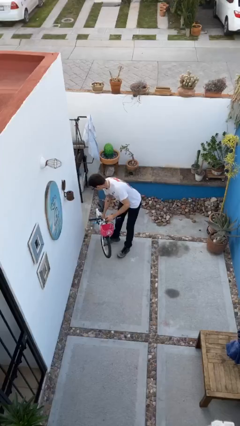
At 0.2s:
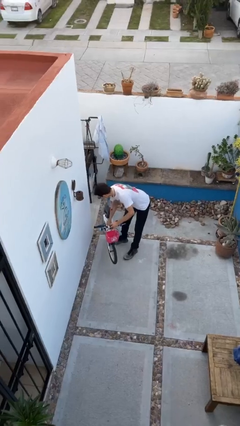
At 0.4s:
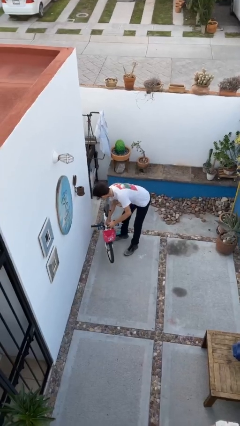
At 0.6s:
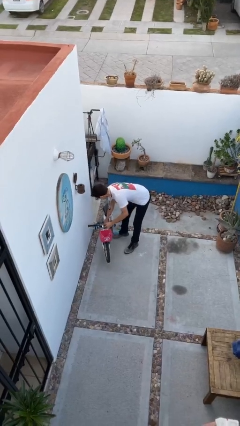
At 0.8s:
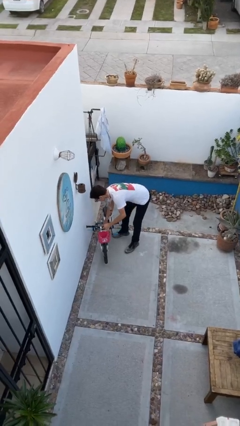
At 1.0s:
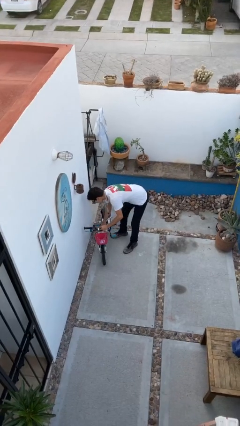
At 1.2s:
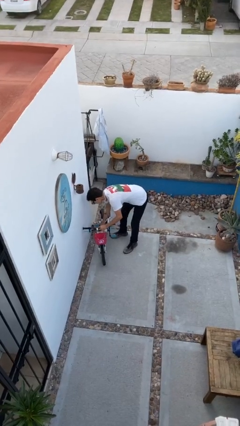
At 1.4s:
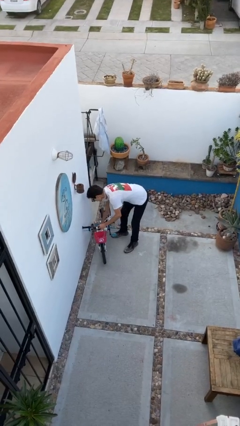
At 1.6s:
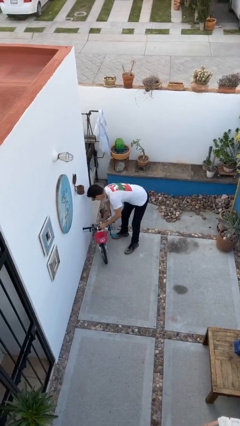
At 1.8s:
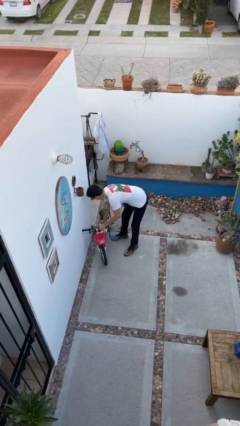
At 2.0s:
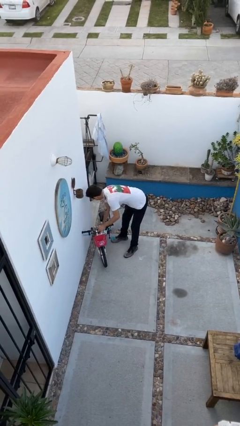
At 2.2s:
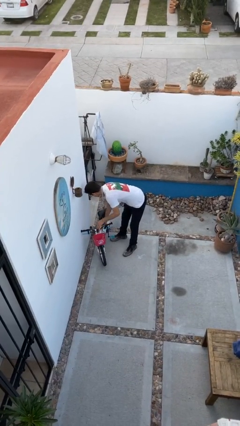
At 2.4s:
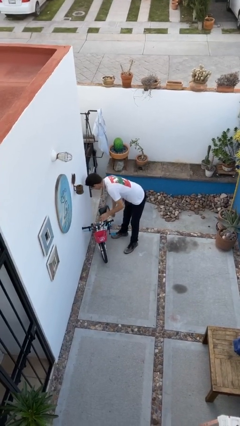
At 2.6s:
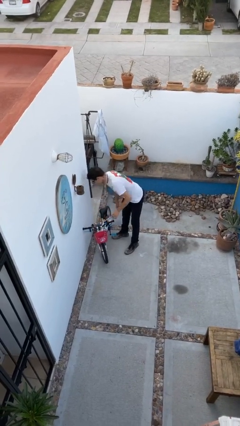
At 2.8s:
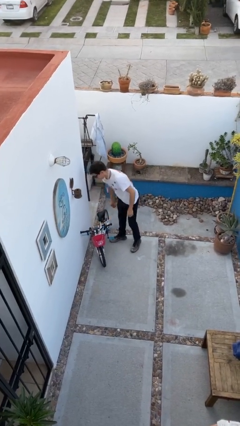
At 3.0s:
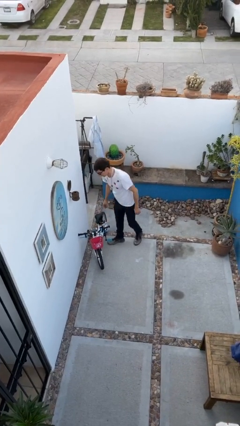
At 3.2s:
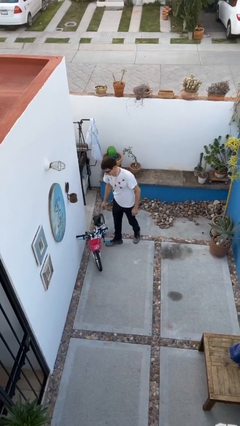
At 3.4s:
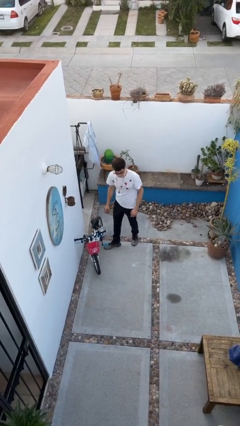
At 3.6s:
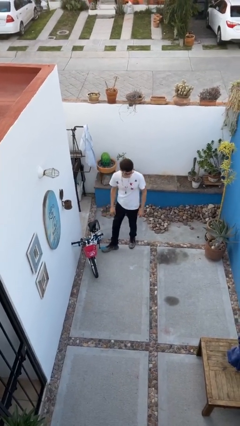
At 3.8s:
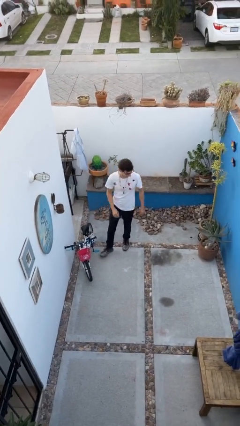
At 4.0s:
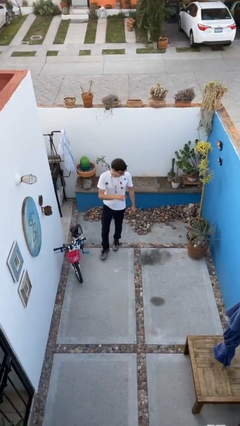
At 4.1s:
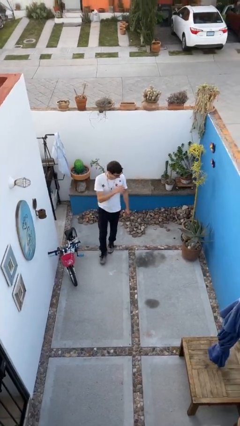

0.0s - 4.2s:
person puts down object on floor

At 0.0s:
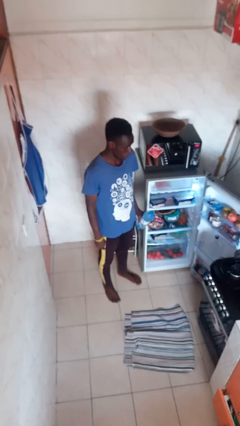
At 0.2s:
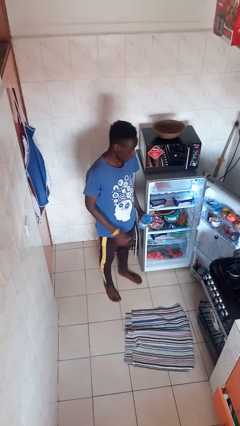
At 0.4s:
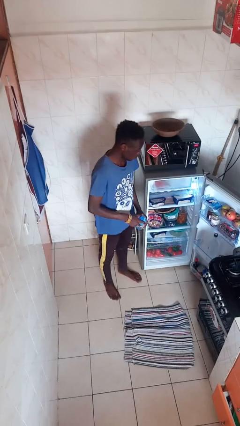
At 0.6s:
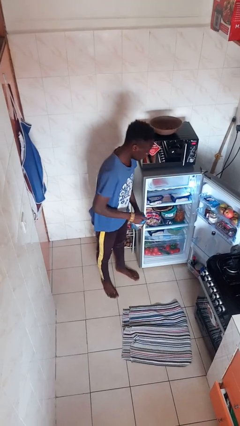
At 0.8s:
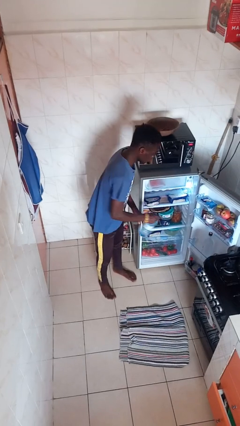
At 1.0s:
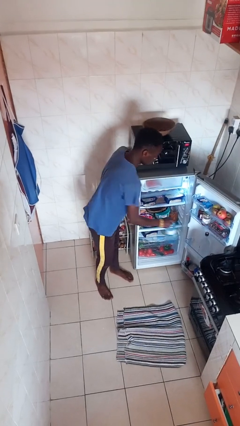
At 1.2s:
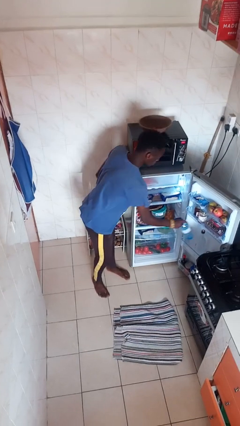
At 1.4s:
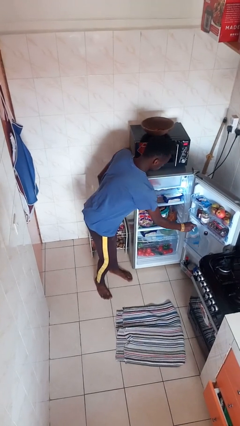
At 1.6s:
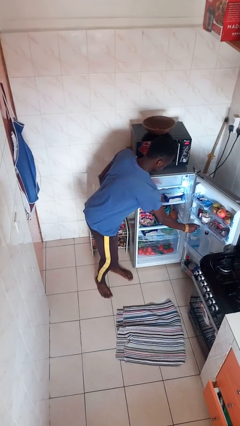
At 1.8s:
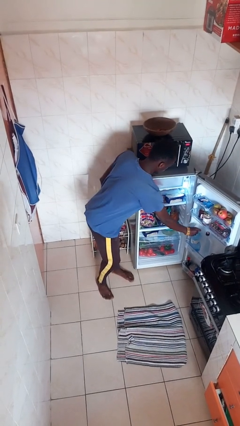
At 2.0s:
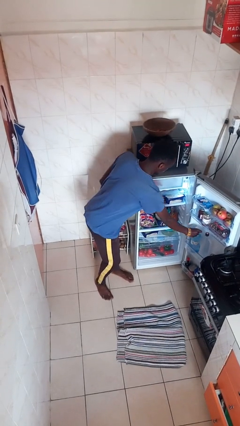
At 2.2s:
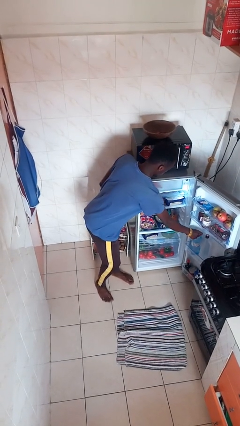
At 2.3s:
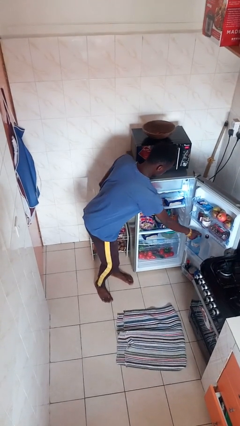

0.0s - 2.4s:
person puts object into refrigerator

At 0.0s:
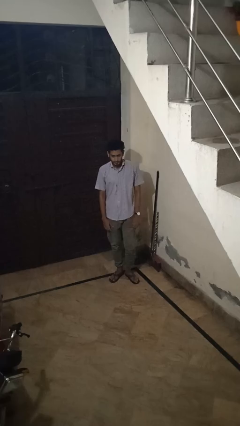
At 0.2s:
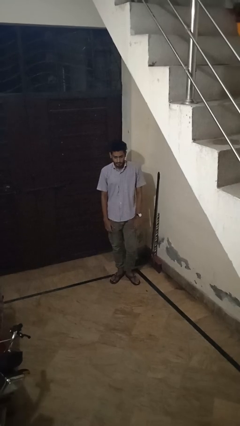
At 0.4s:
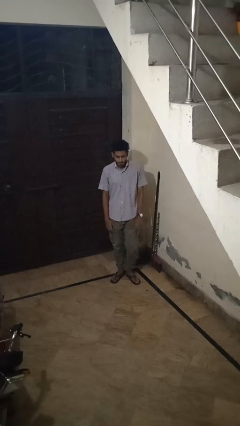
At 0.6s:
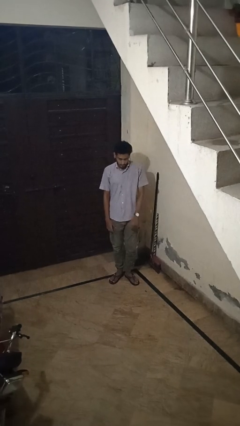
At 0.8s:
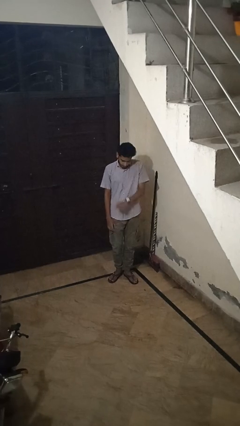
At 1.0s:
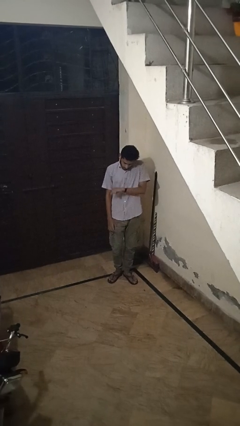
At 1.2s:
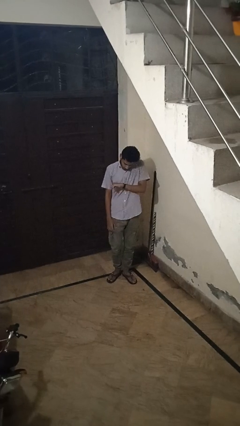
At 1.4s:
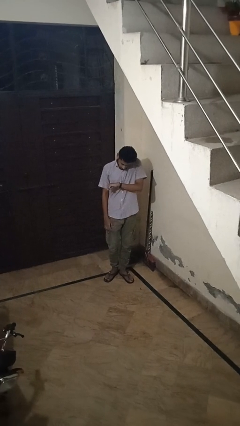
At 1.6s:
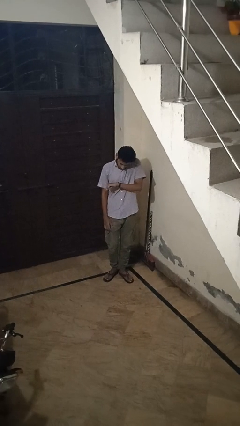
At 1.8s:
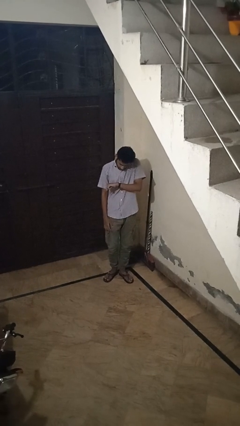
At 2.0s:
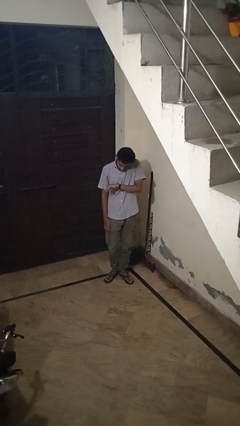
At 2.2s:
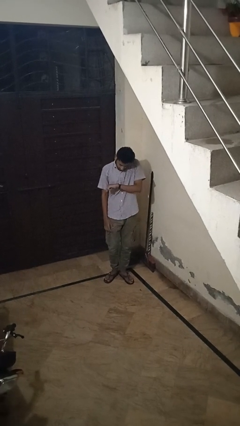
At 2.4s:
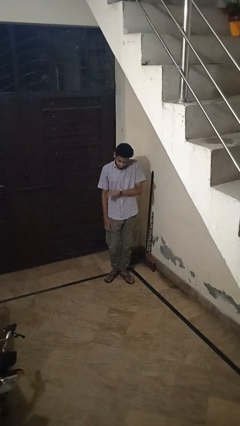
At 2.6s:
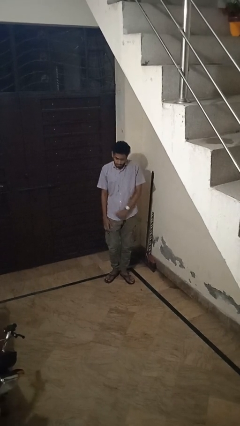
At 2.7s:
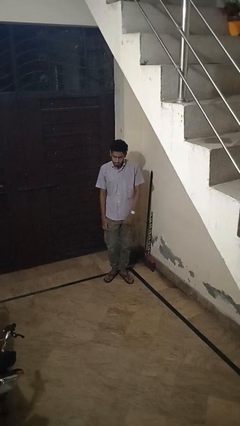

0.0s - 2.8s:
person looks at wristwatch

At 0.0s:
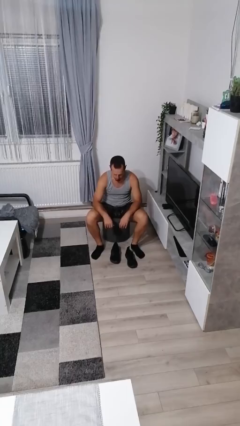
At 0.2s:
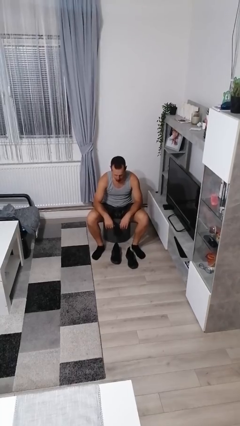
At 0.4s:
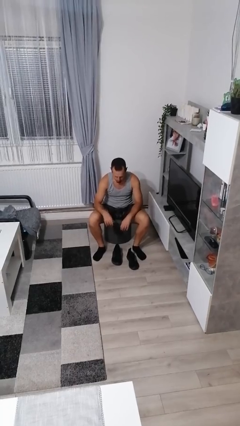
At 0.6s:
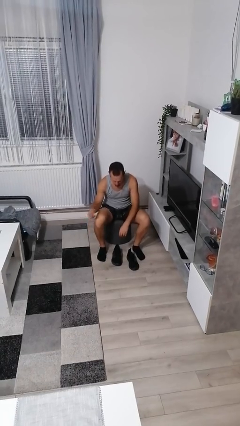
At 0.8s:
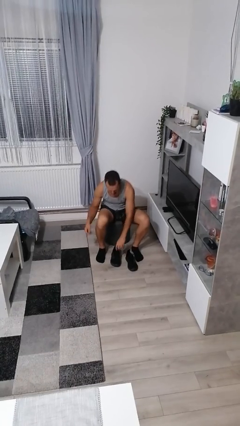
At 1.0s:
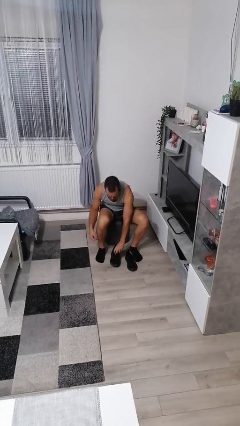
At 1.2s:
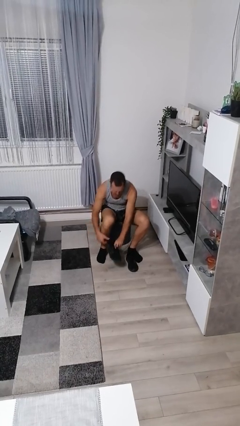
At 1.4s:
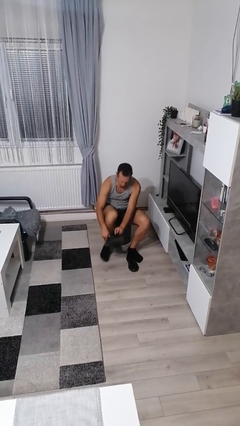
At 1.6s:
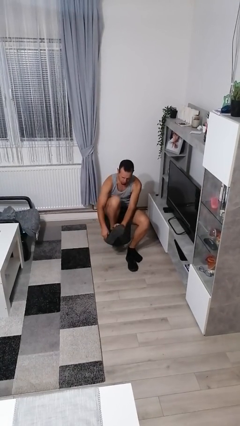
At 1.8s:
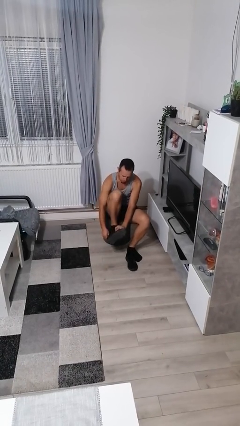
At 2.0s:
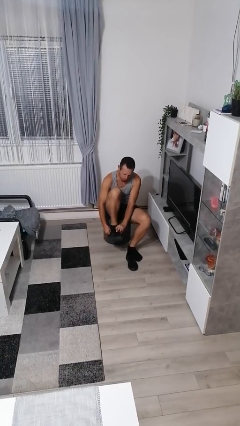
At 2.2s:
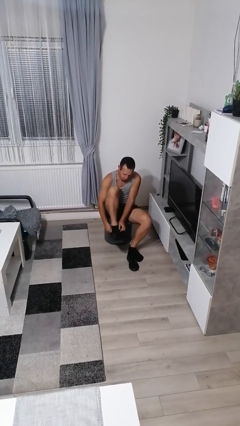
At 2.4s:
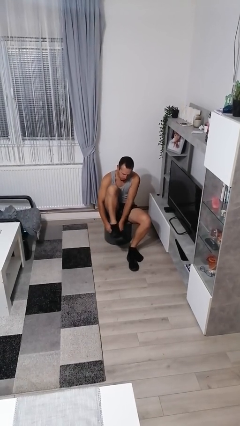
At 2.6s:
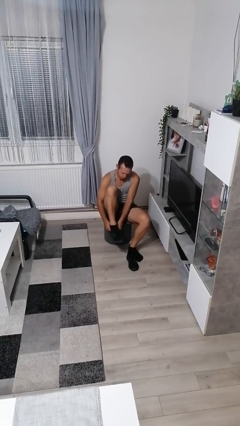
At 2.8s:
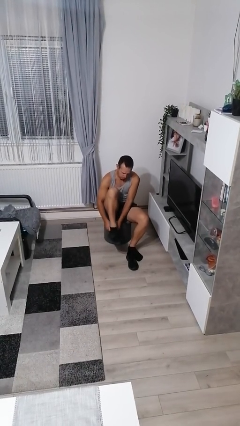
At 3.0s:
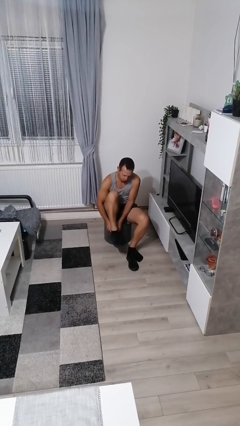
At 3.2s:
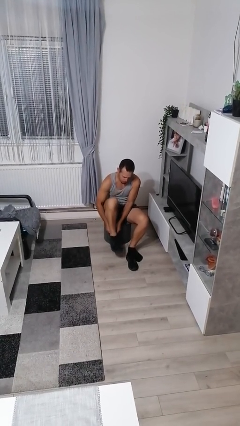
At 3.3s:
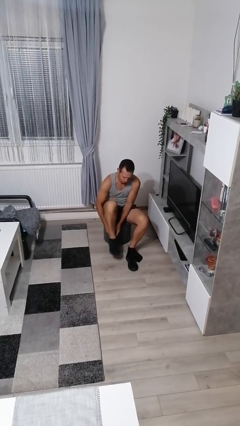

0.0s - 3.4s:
person puts on shoes

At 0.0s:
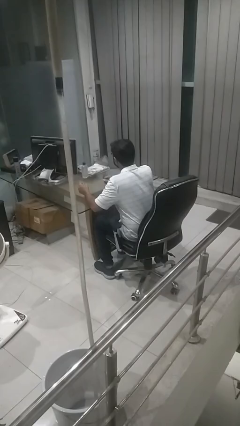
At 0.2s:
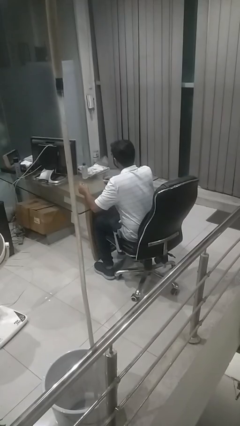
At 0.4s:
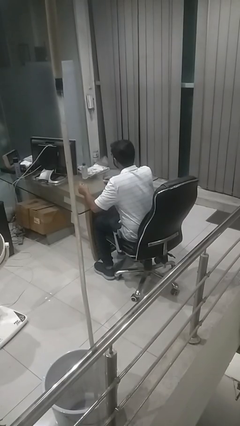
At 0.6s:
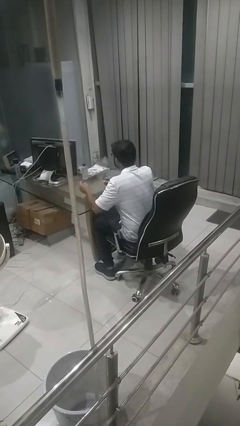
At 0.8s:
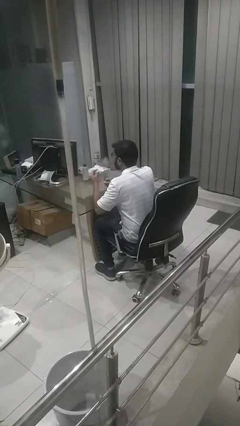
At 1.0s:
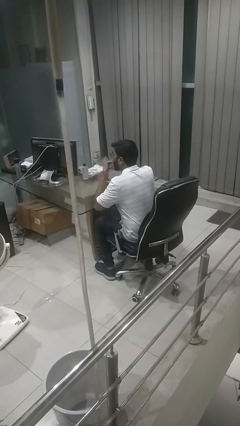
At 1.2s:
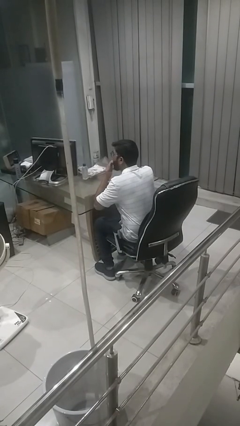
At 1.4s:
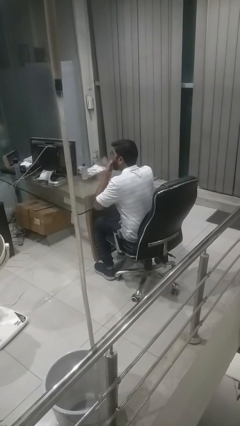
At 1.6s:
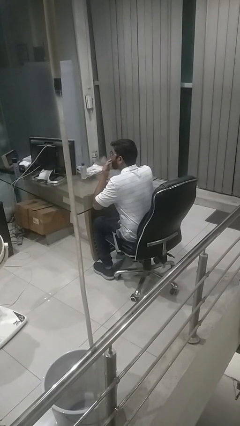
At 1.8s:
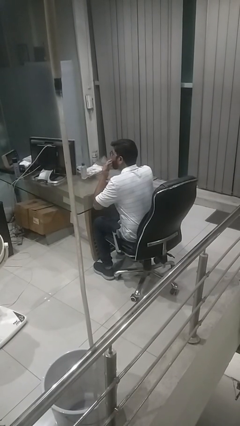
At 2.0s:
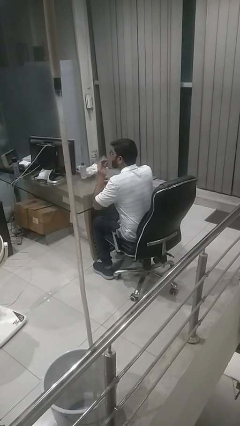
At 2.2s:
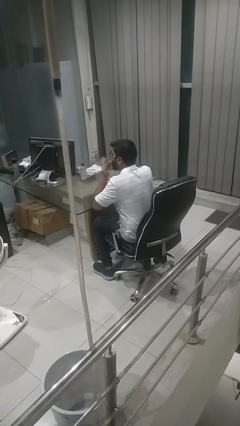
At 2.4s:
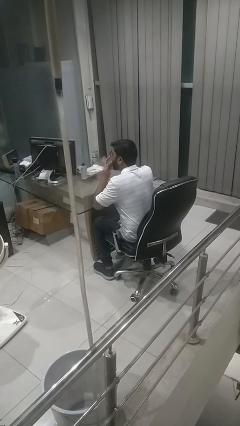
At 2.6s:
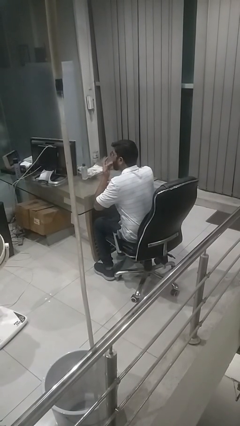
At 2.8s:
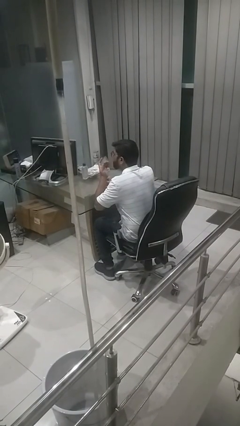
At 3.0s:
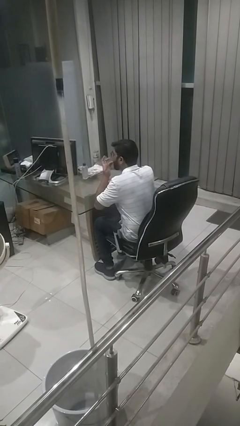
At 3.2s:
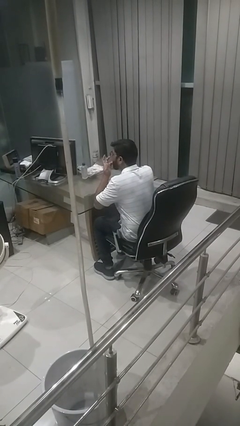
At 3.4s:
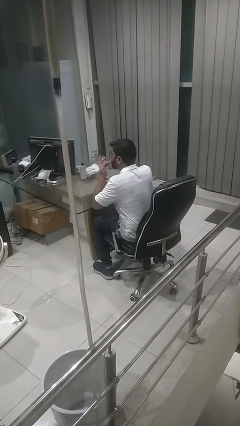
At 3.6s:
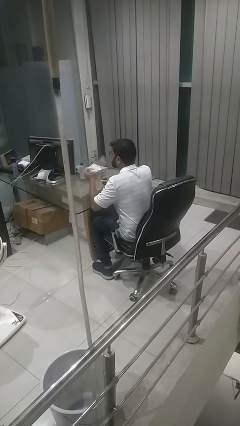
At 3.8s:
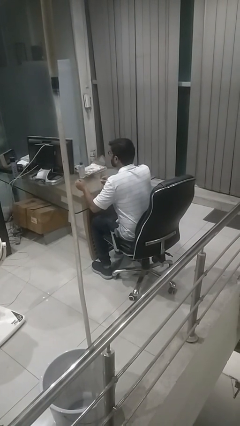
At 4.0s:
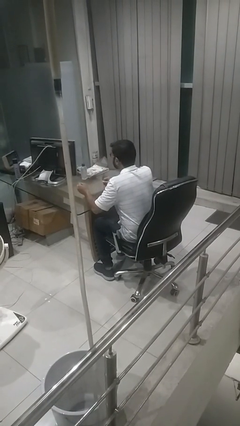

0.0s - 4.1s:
person licks fingers

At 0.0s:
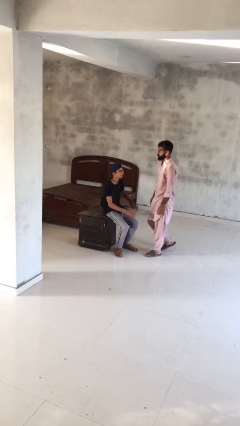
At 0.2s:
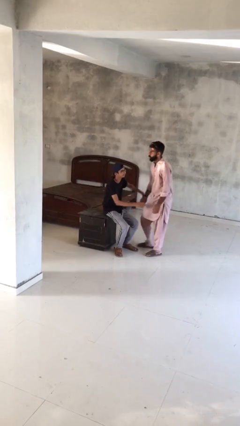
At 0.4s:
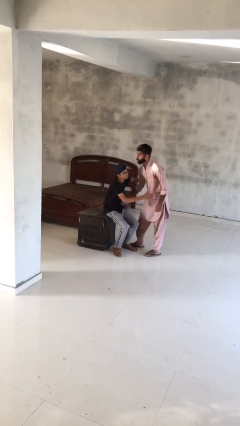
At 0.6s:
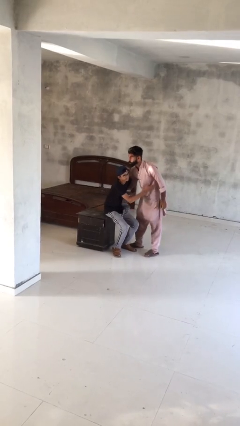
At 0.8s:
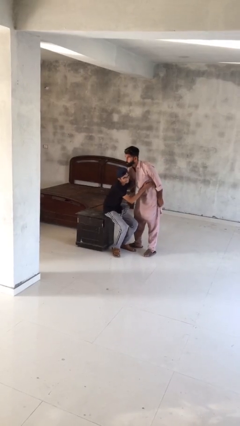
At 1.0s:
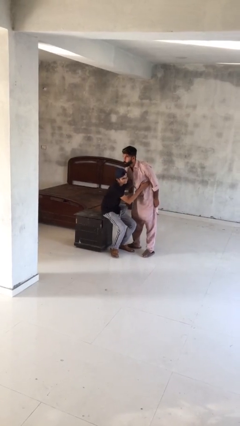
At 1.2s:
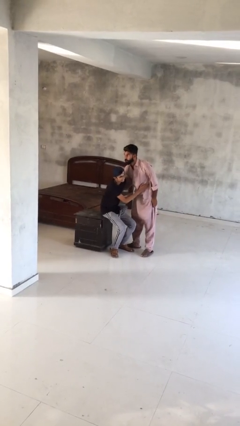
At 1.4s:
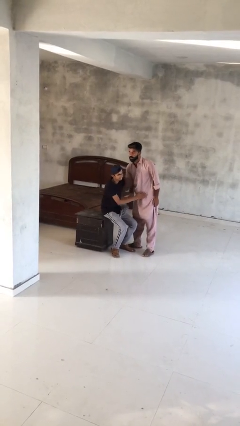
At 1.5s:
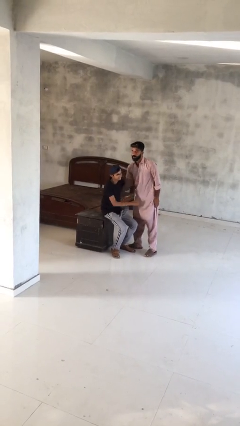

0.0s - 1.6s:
person embraces person
